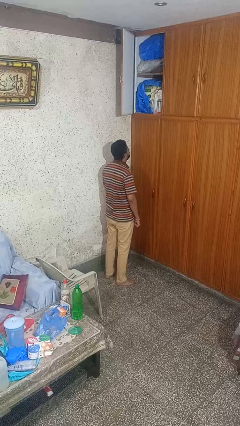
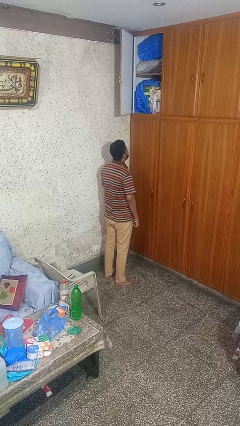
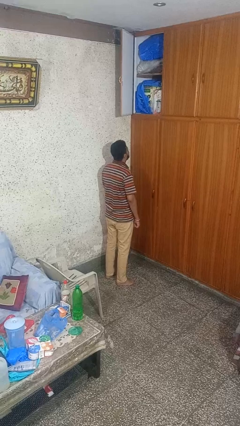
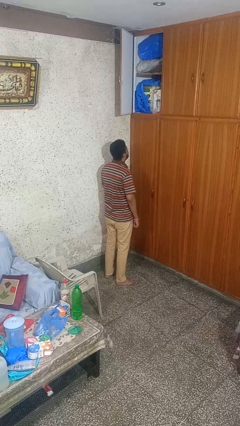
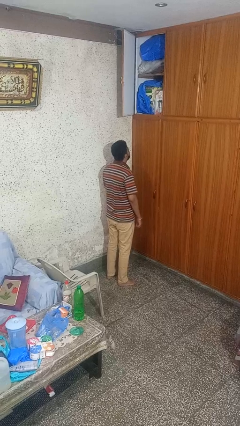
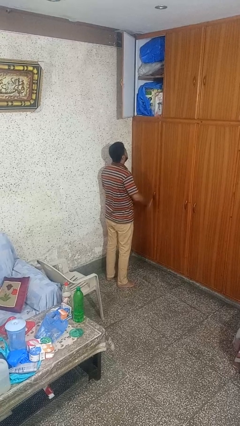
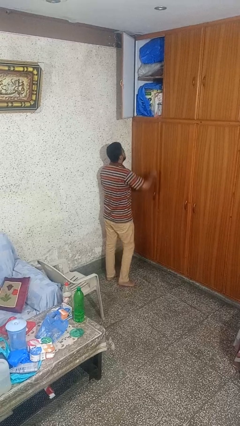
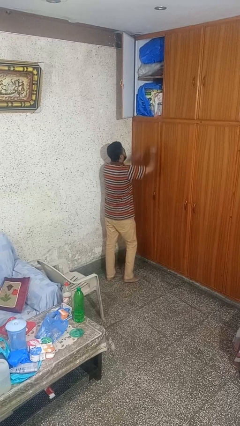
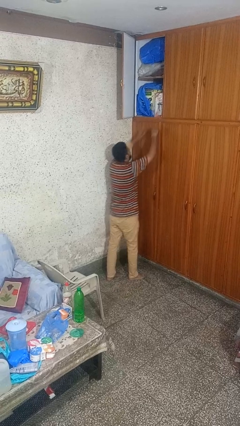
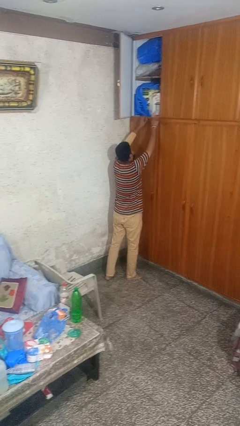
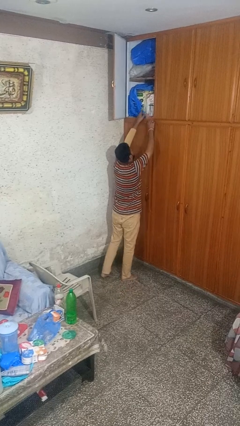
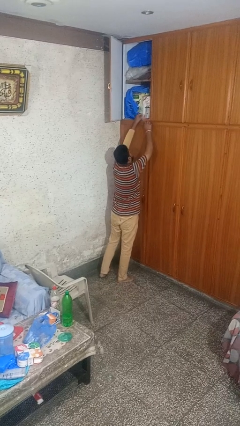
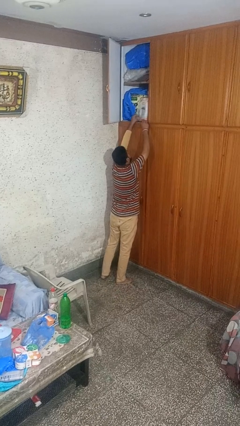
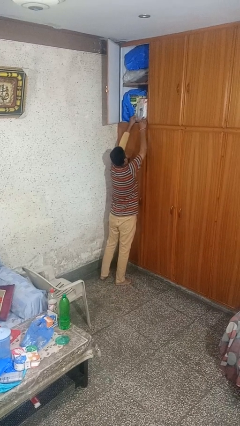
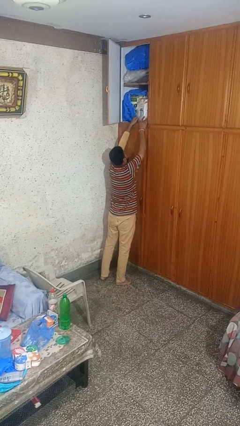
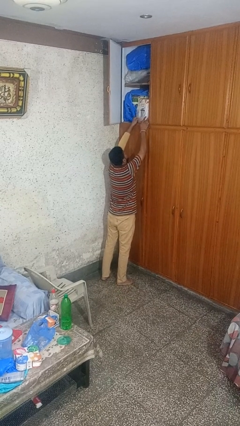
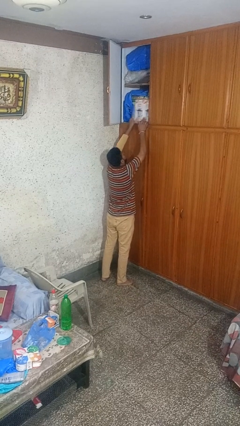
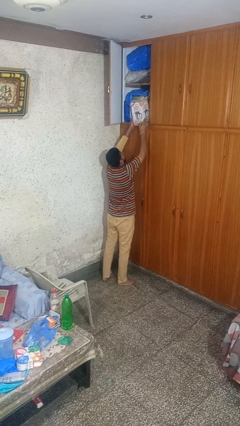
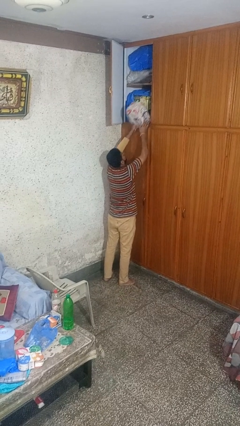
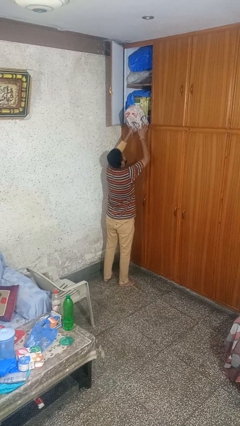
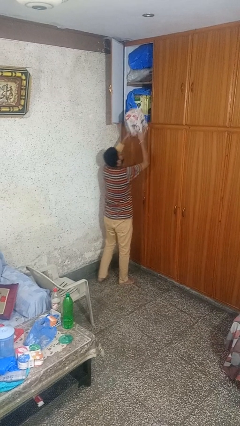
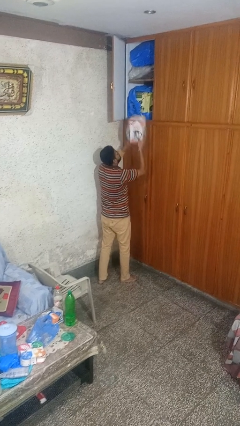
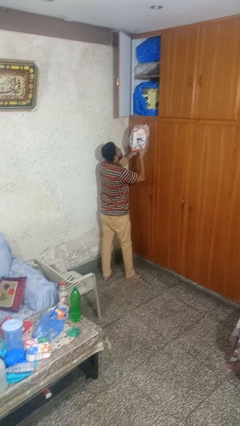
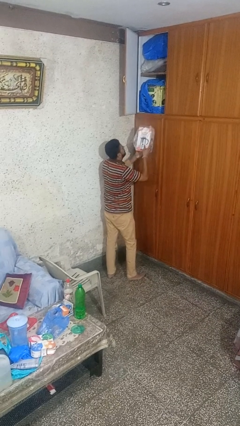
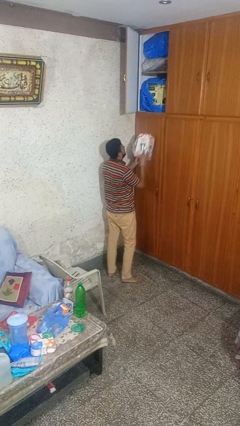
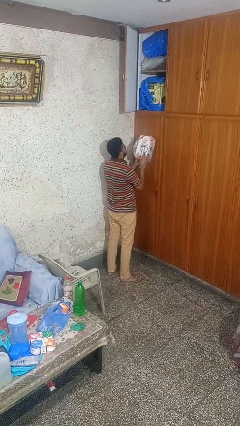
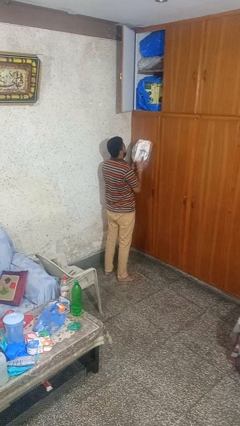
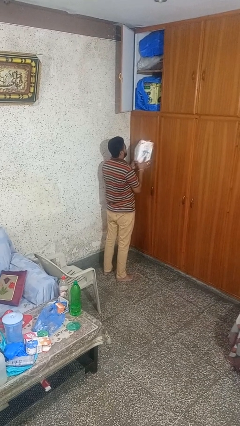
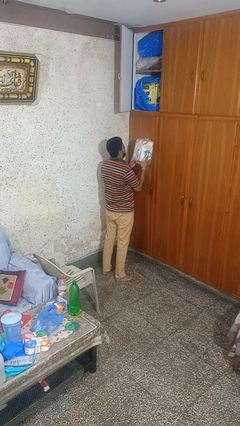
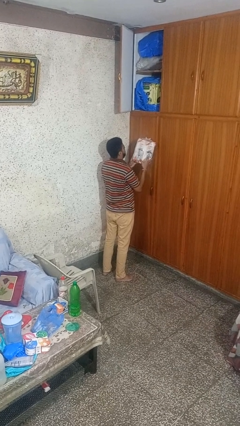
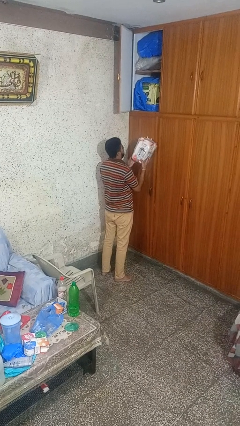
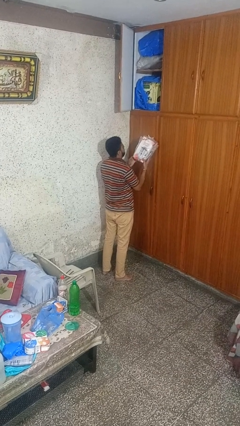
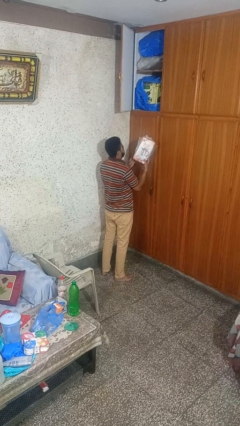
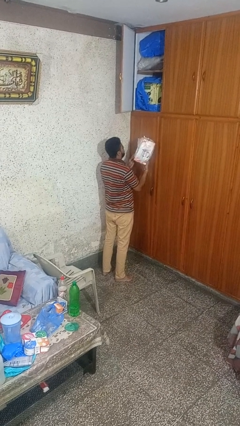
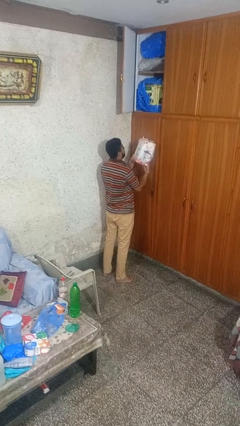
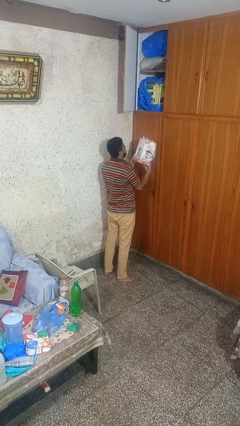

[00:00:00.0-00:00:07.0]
person picks up object from countertop

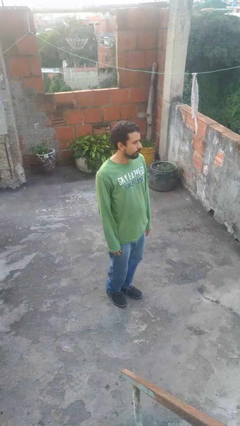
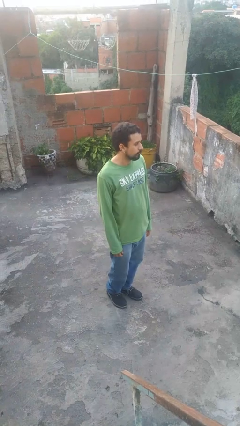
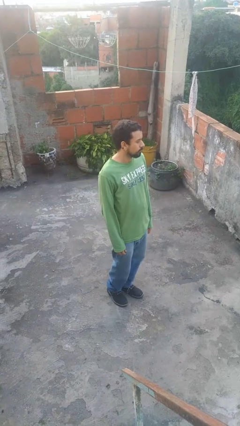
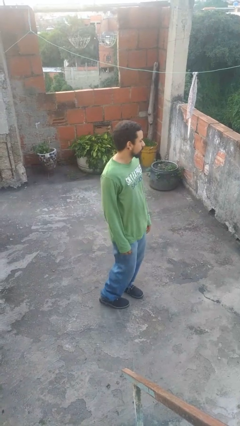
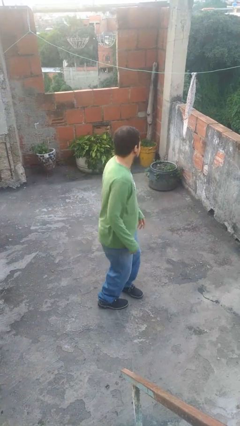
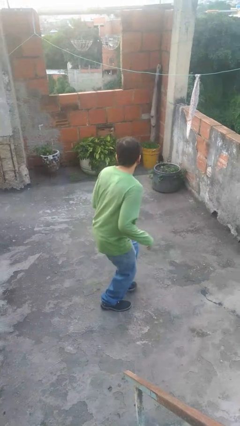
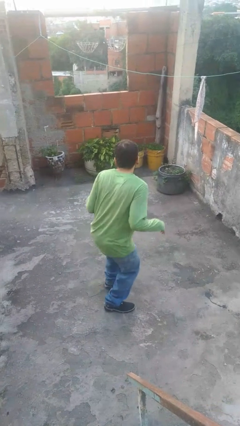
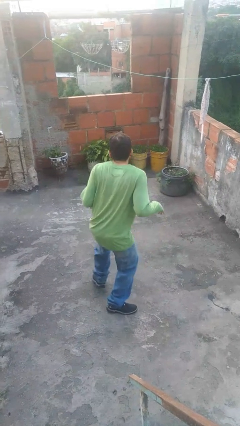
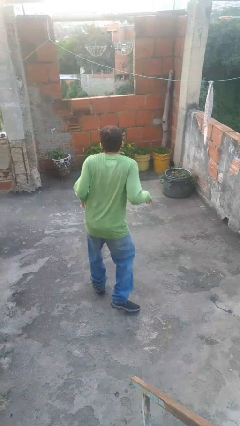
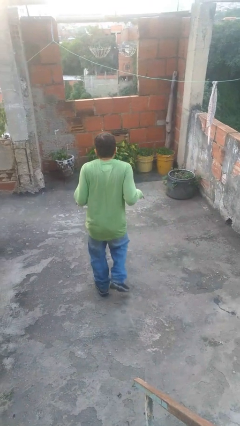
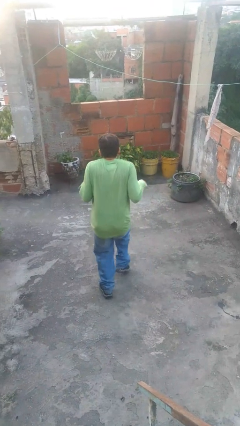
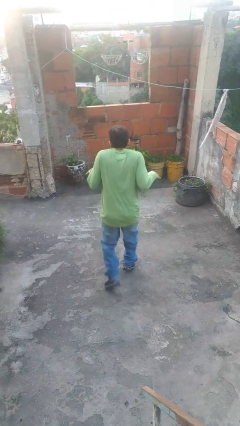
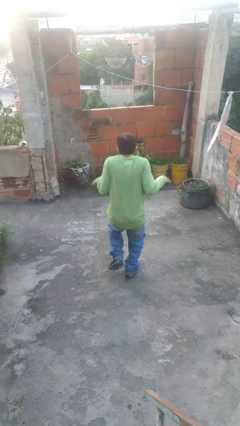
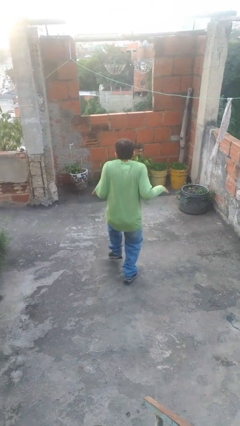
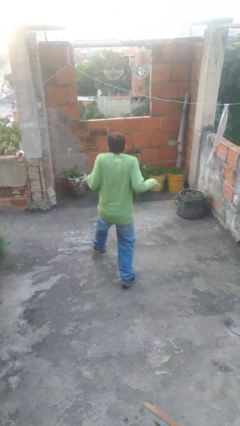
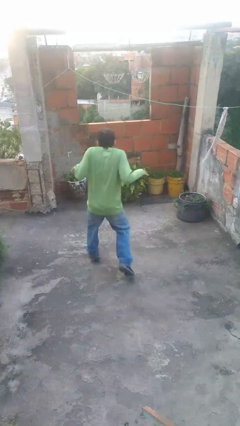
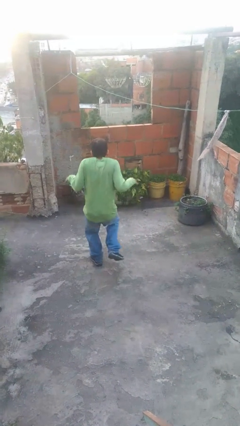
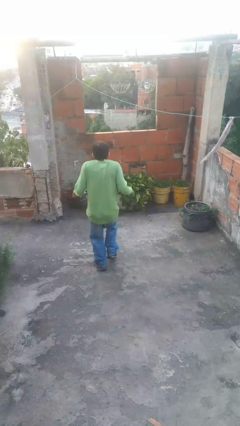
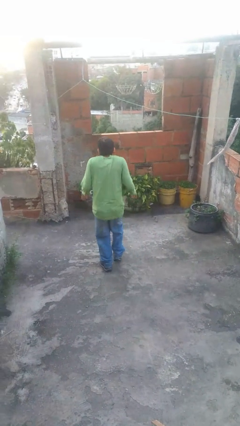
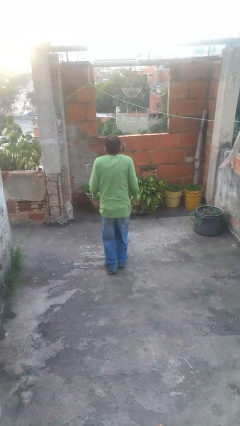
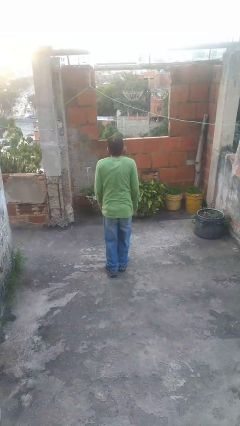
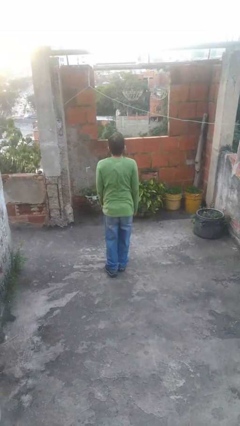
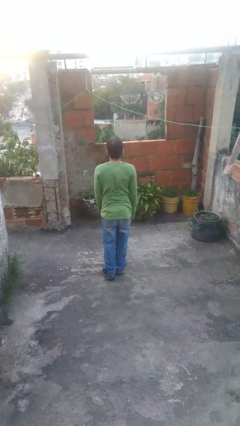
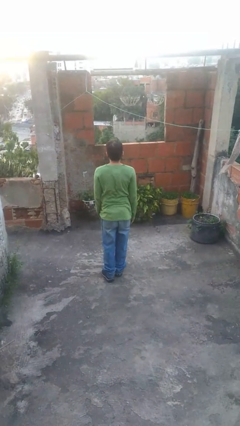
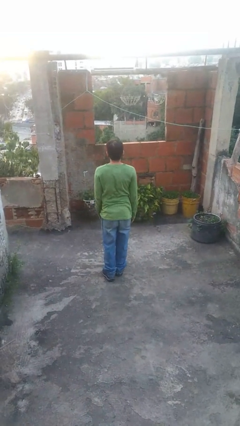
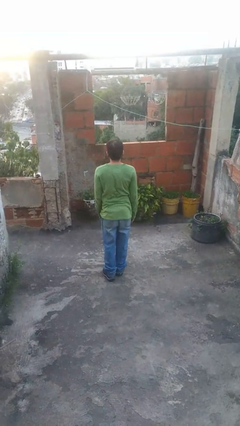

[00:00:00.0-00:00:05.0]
person walks tiptoe

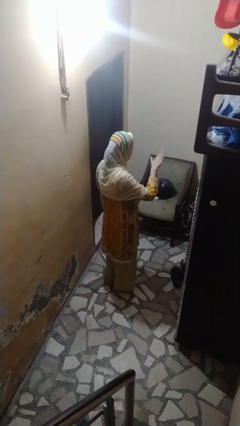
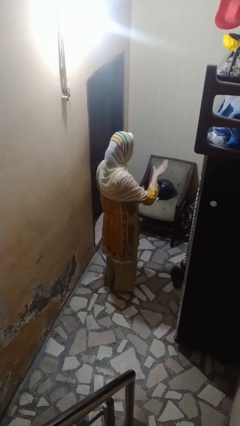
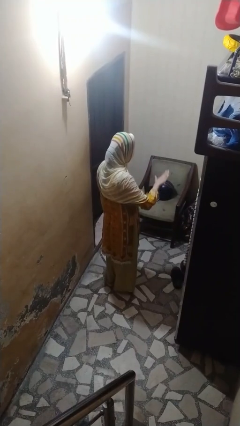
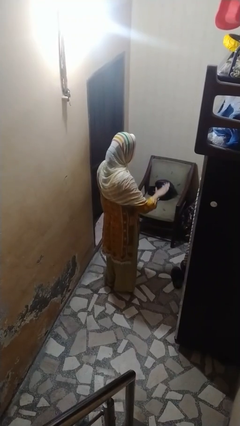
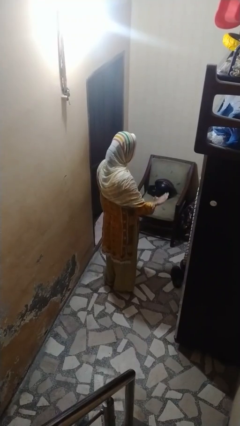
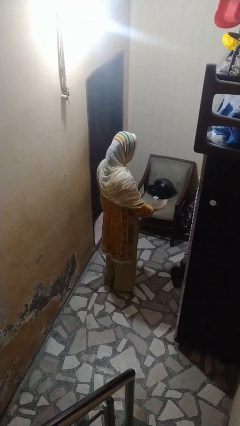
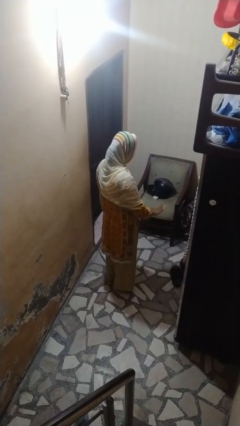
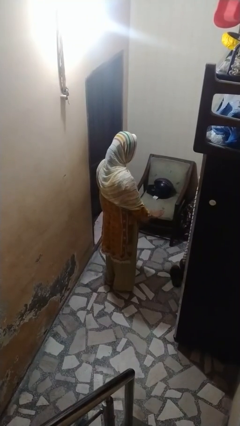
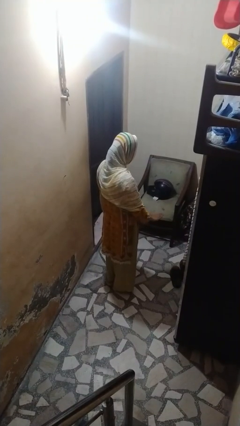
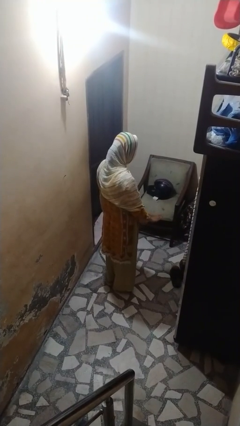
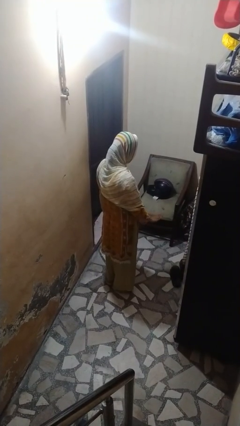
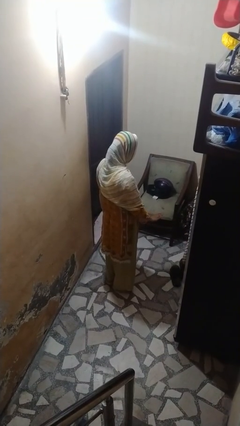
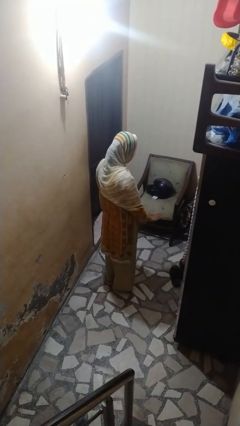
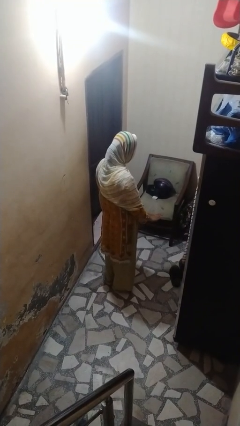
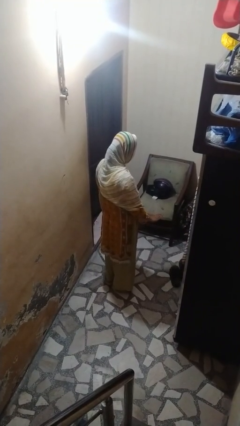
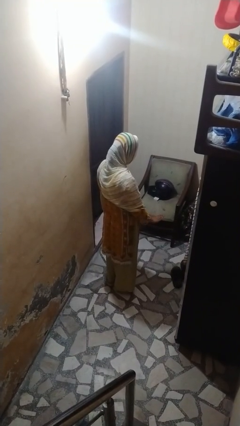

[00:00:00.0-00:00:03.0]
person gestures swipe down

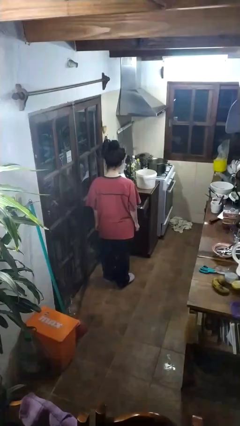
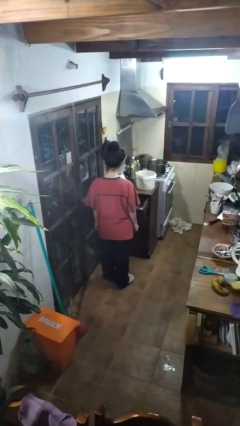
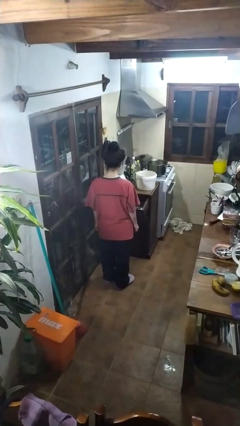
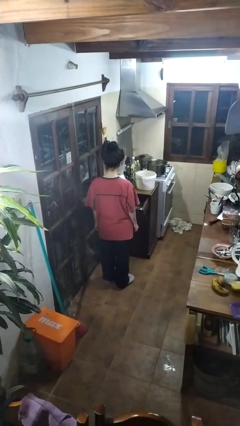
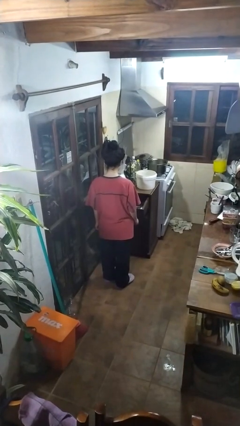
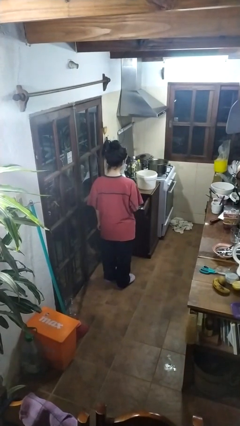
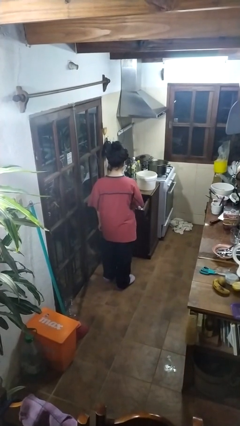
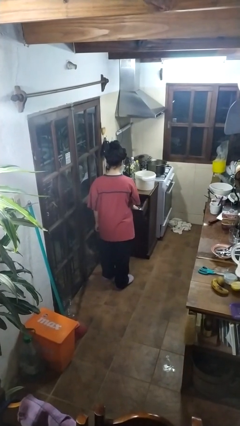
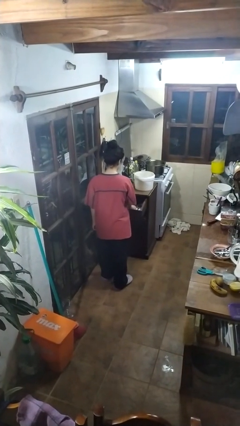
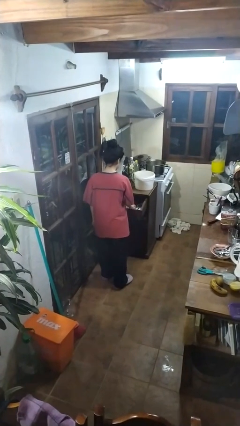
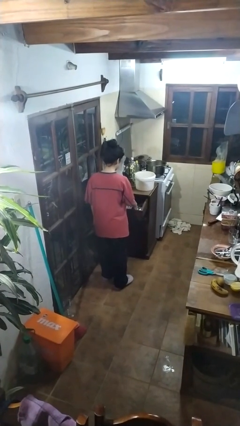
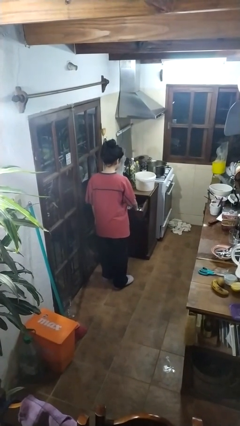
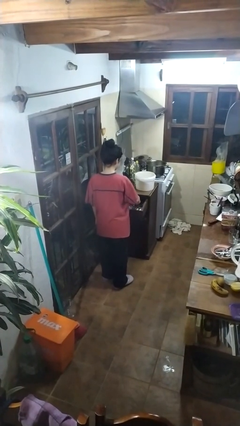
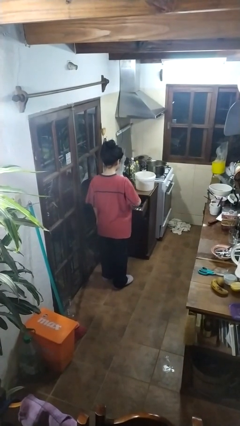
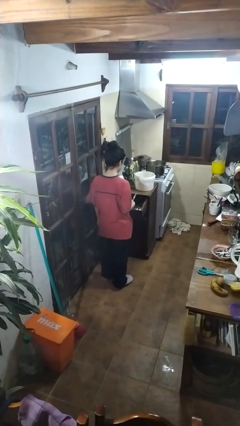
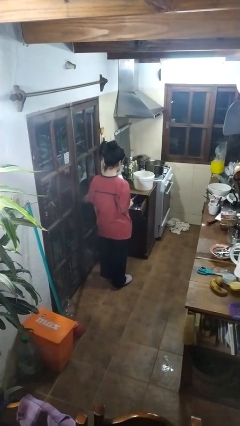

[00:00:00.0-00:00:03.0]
person takes object from kitchen drawer

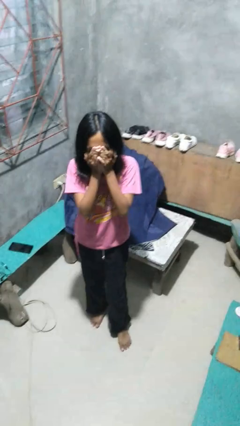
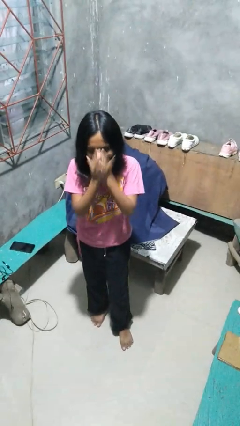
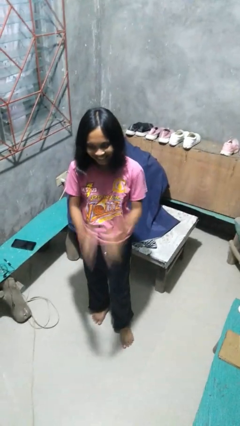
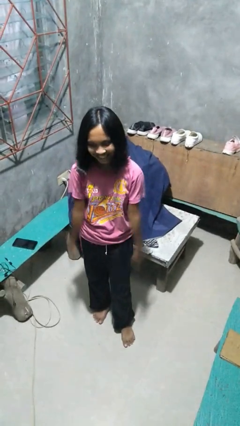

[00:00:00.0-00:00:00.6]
person yawns
